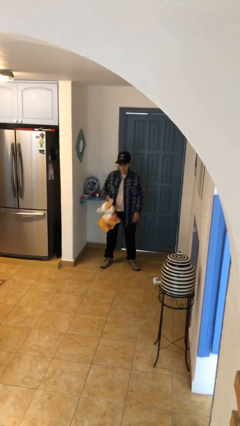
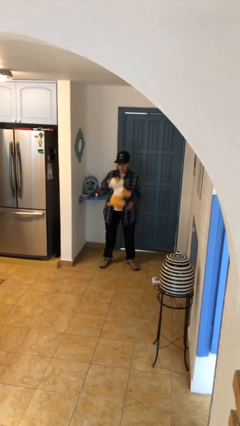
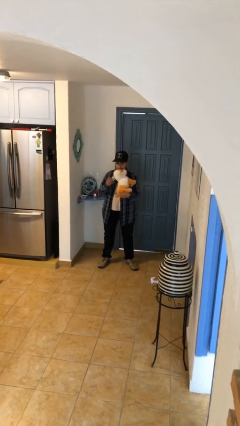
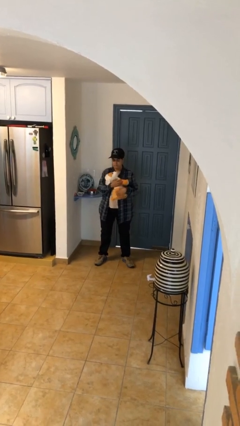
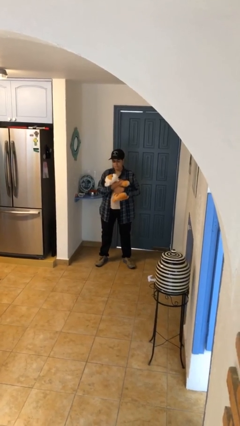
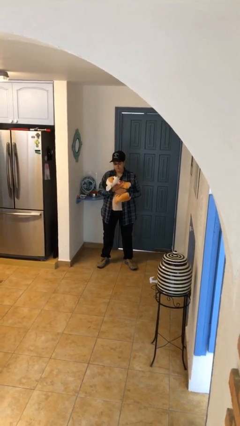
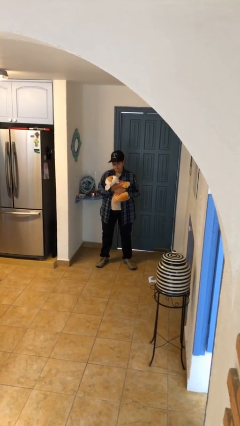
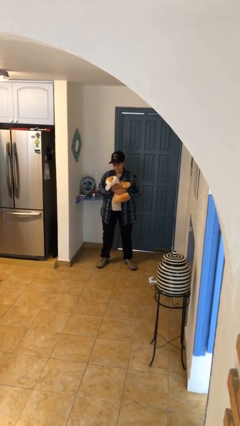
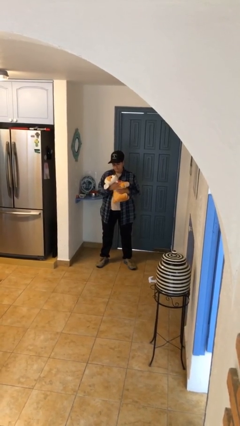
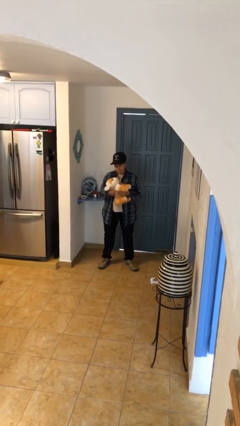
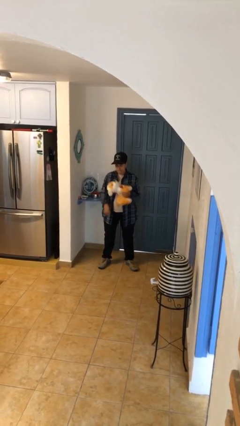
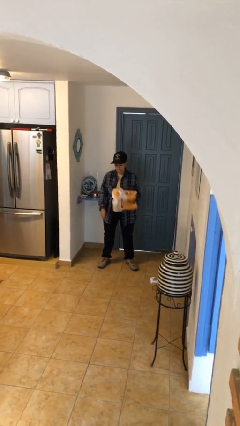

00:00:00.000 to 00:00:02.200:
person hugs stuffed animal

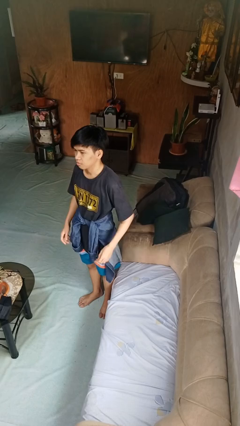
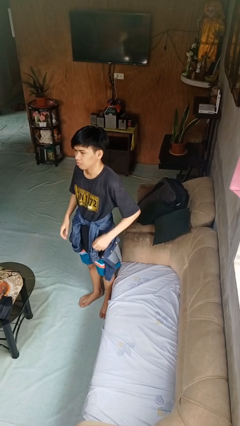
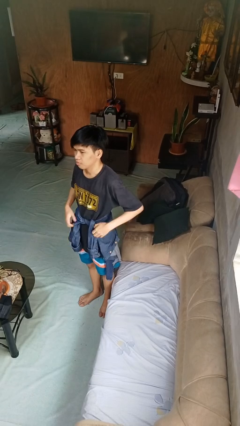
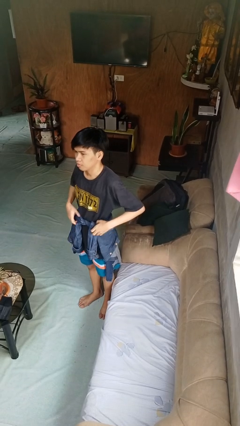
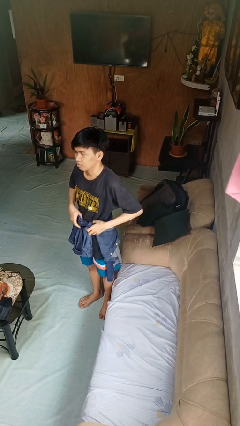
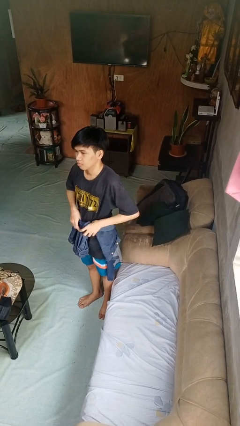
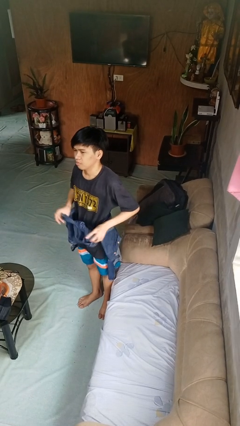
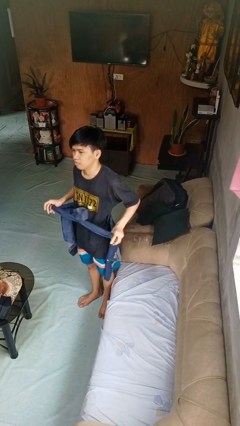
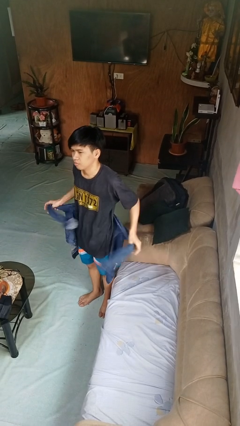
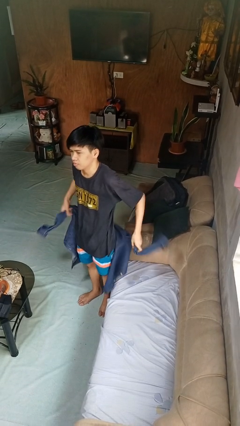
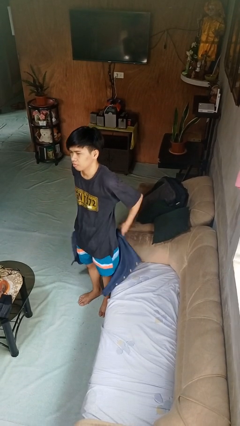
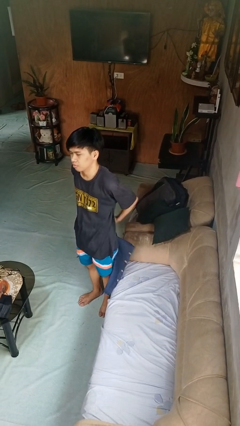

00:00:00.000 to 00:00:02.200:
person unties jacket around waist

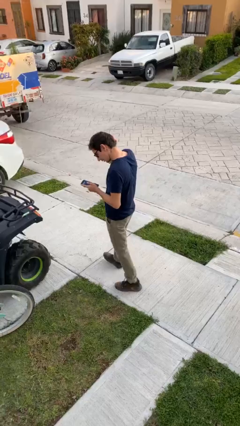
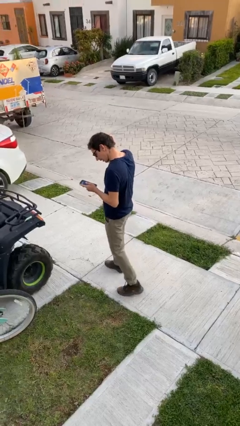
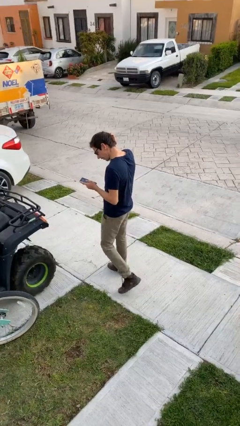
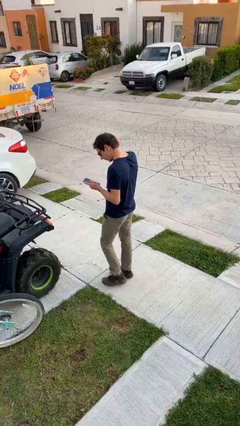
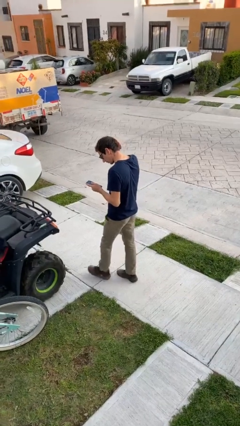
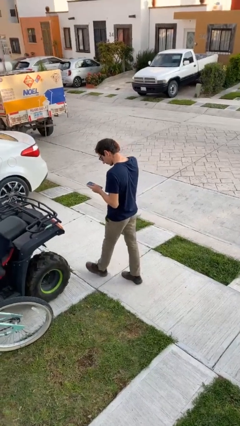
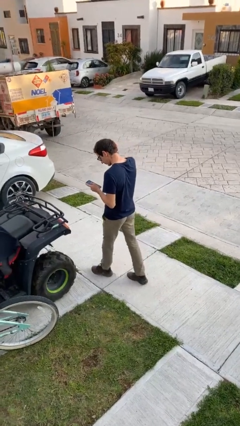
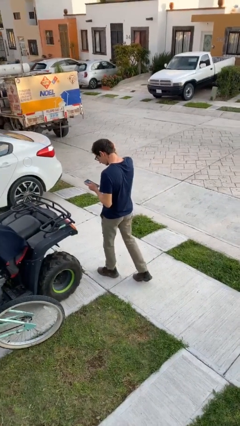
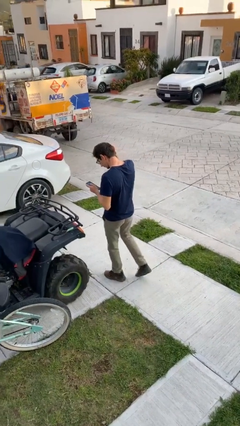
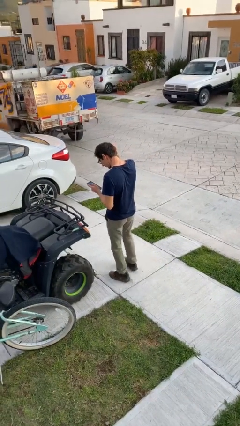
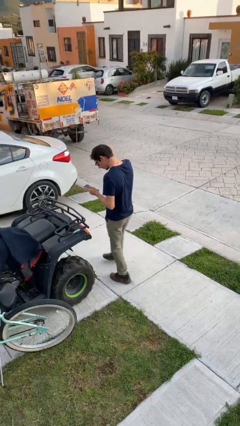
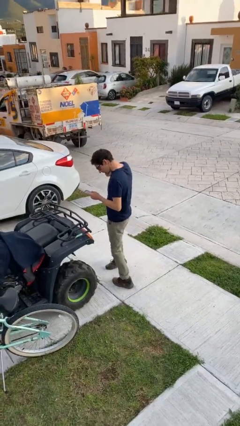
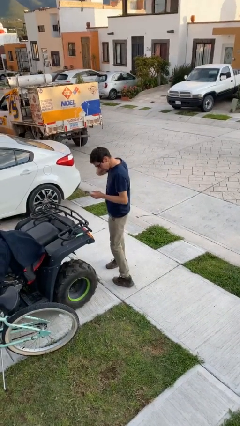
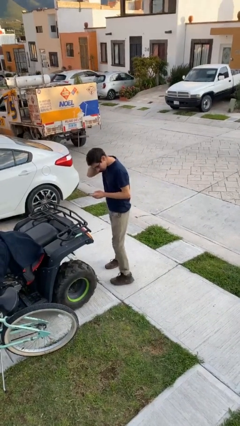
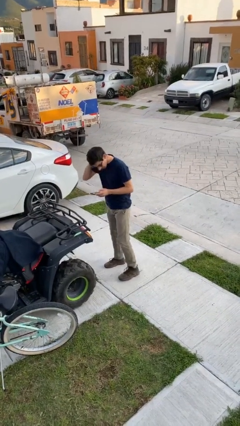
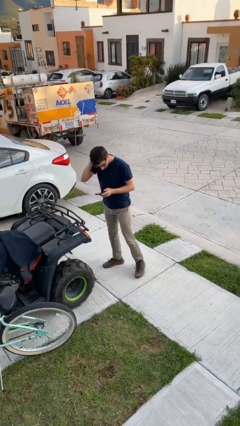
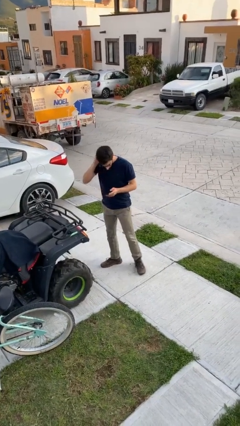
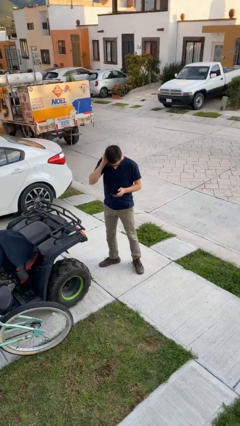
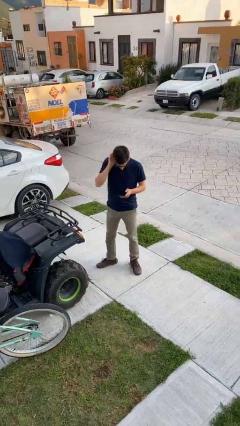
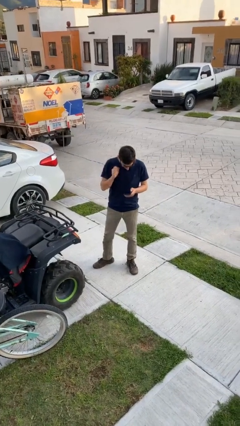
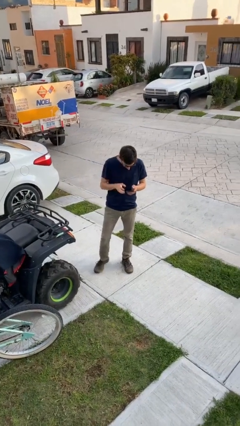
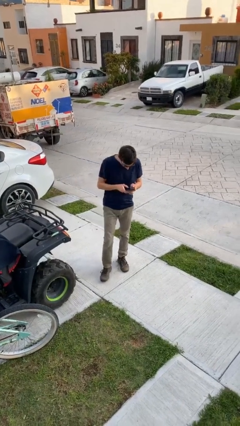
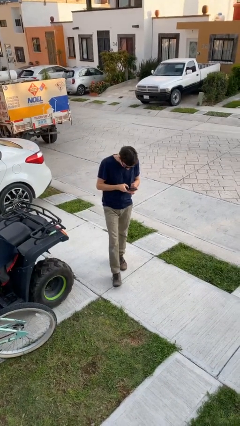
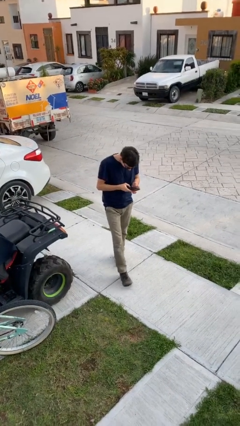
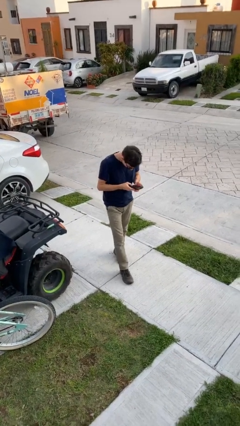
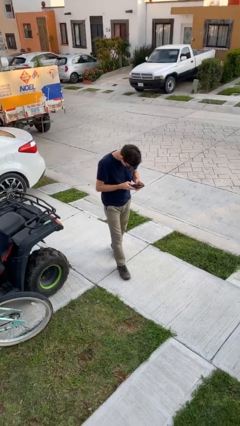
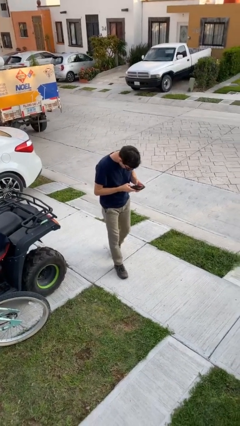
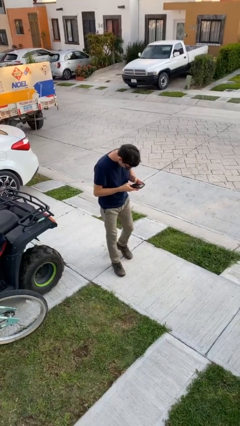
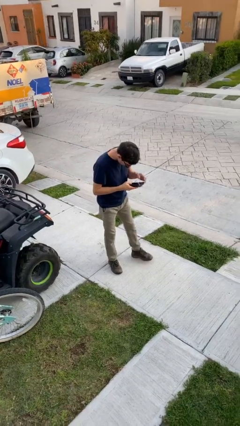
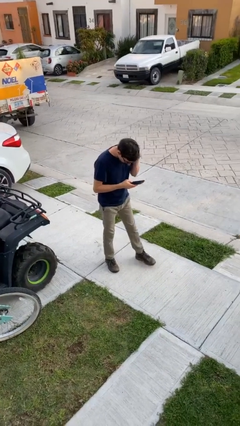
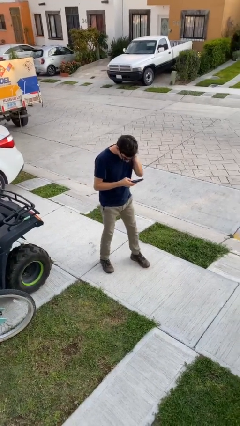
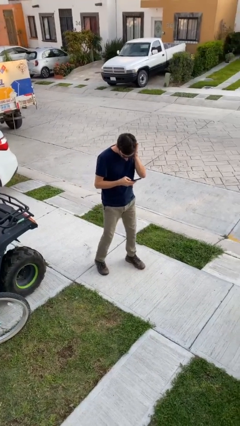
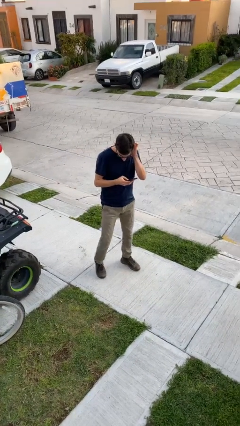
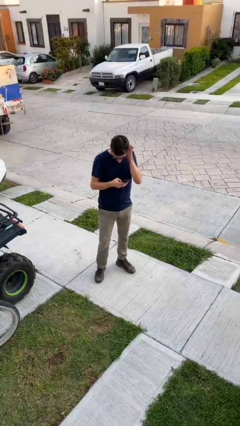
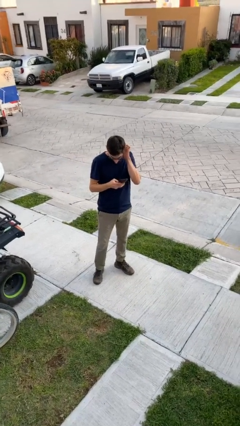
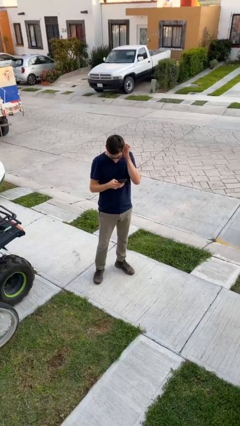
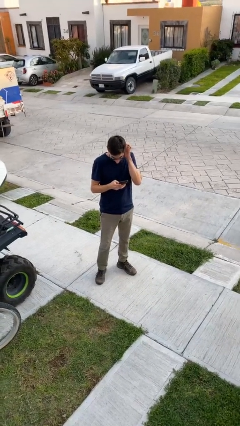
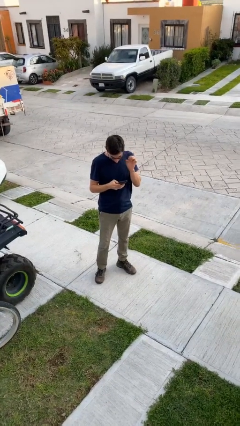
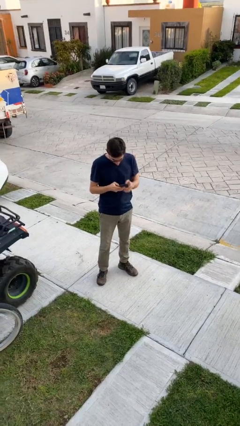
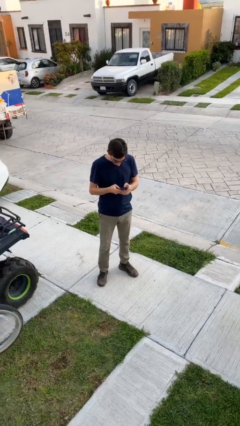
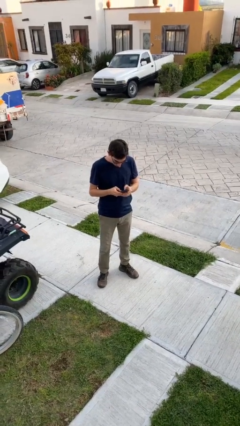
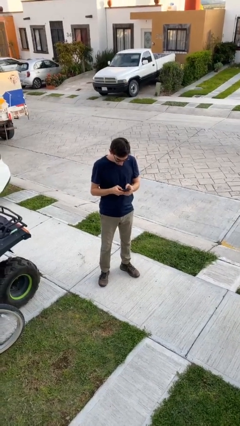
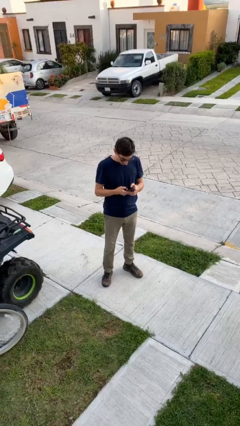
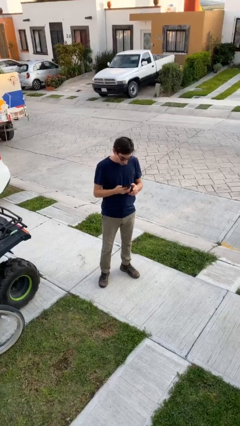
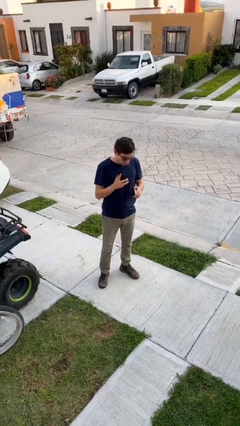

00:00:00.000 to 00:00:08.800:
person texts on phone

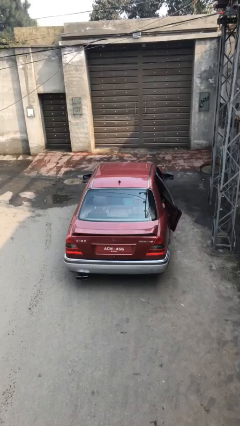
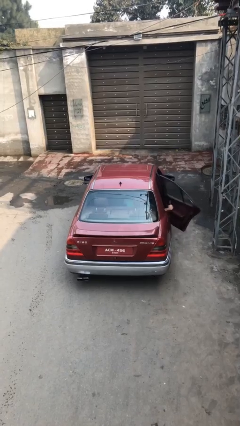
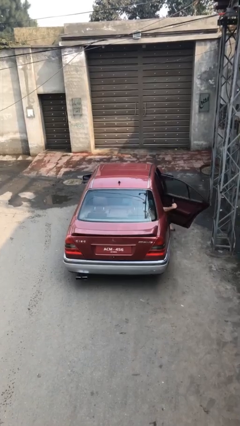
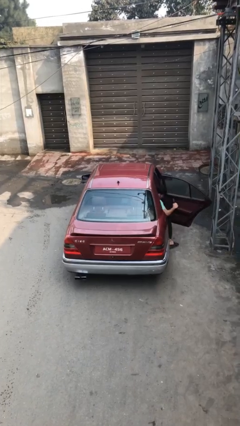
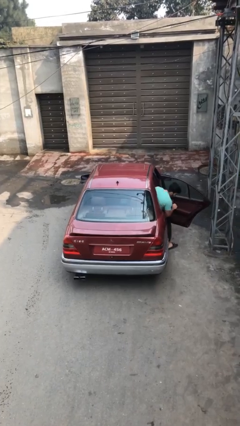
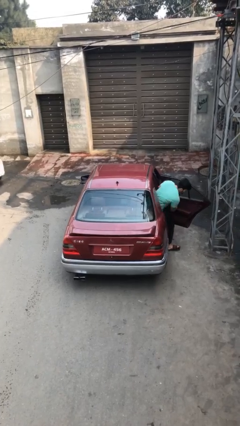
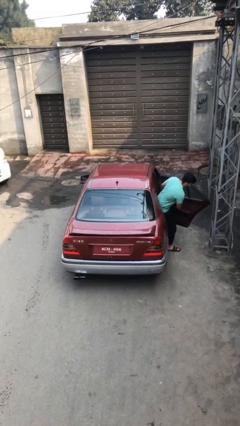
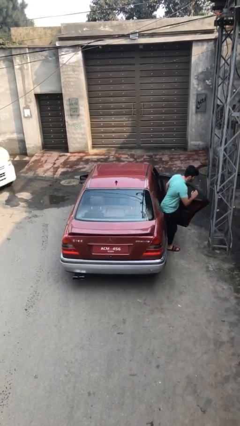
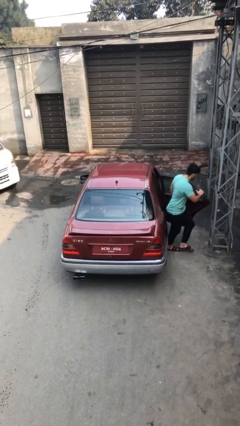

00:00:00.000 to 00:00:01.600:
car drops off person

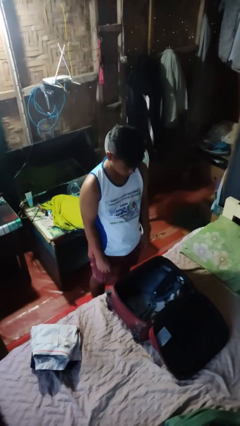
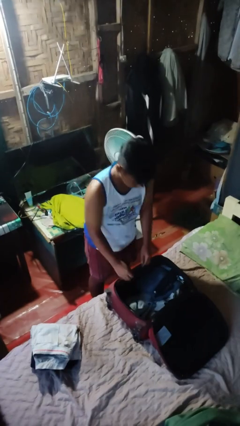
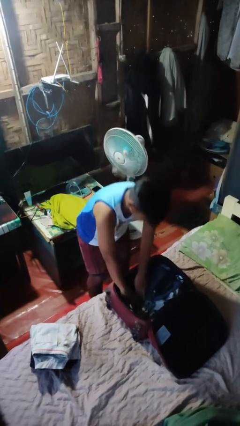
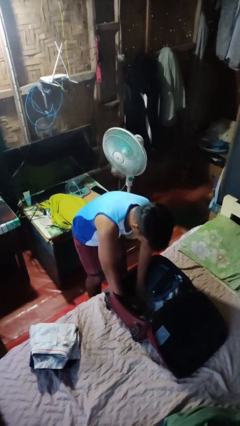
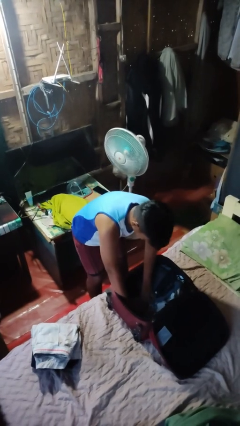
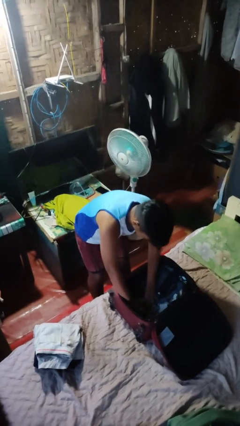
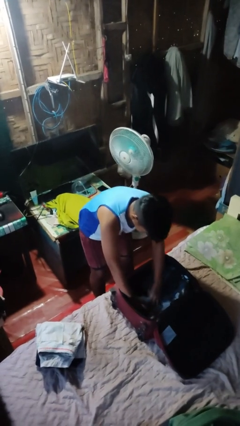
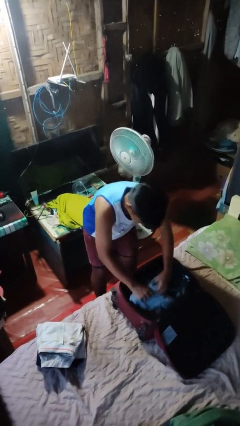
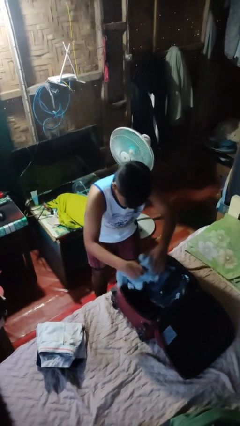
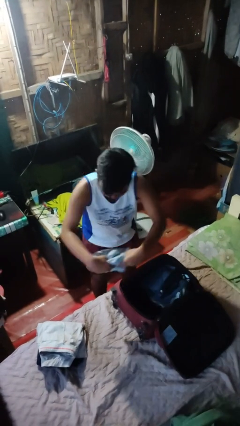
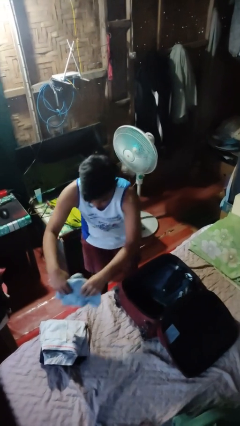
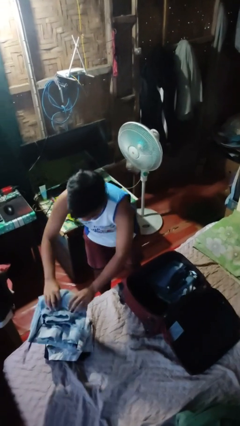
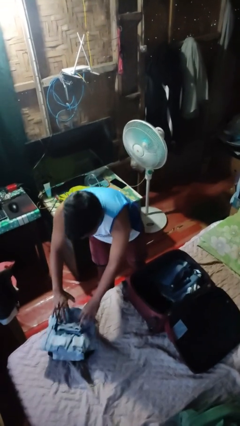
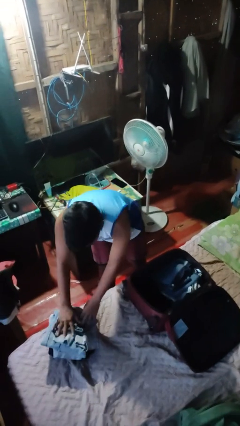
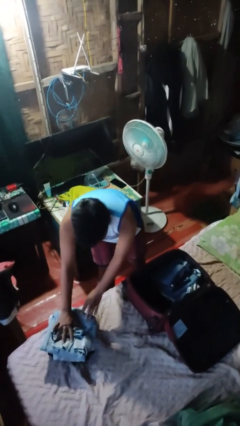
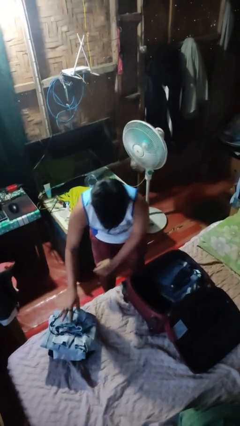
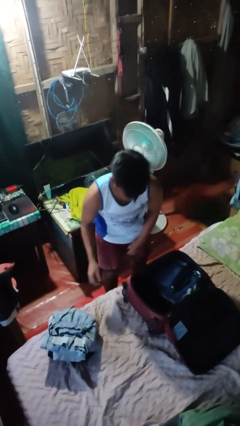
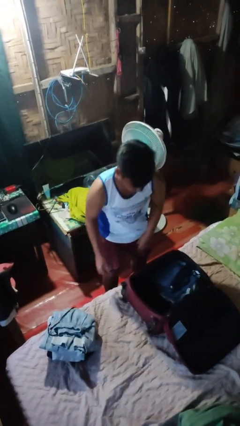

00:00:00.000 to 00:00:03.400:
person unloads clothes from suitcase
